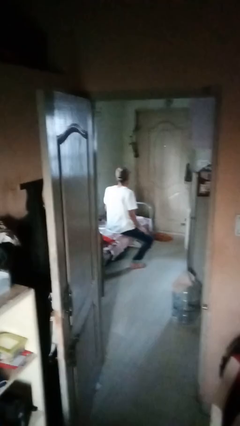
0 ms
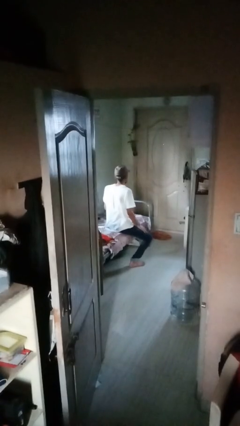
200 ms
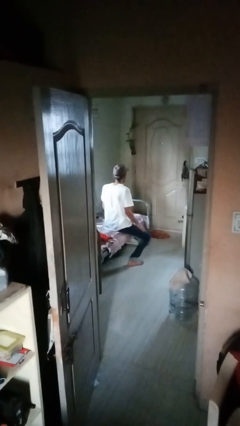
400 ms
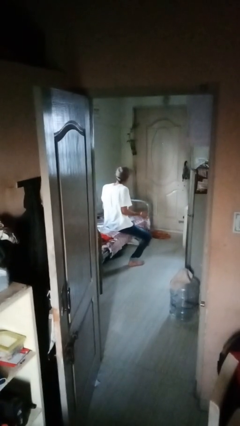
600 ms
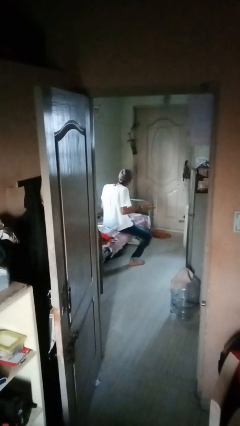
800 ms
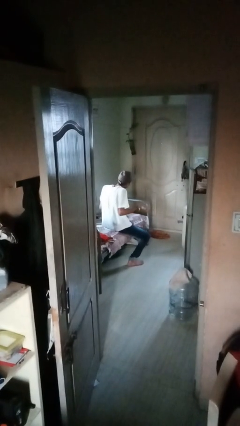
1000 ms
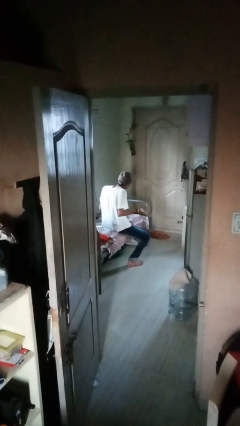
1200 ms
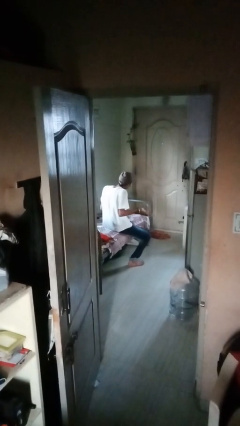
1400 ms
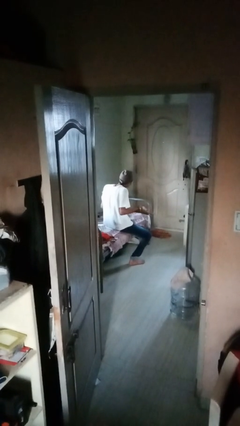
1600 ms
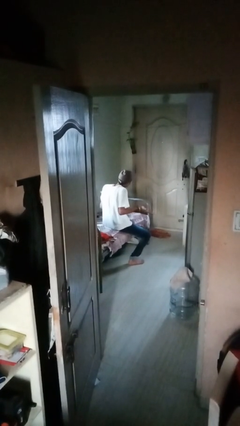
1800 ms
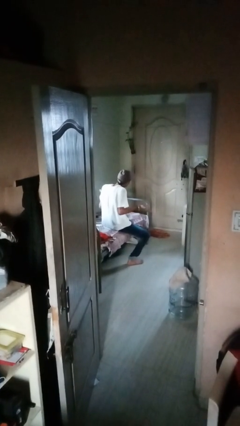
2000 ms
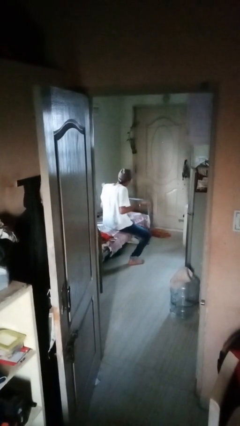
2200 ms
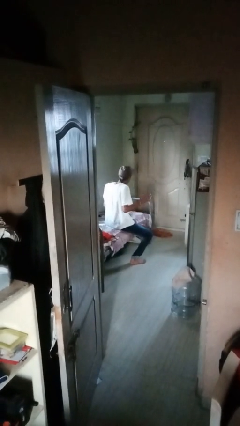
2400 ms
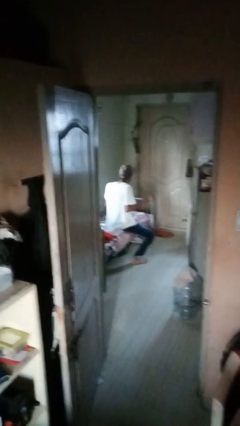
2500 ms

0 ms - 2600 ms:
person shrugs

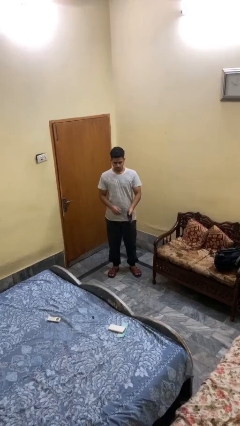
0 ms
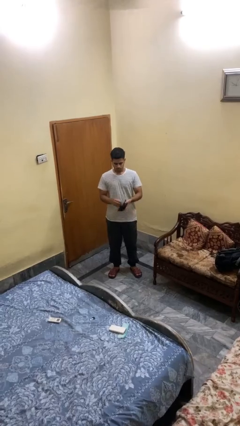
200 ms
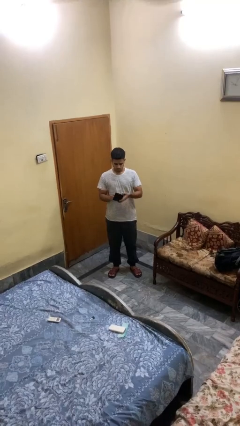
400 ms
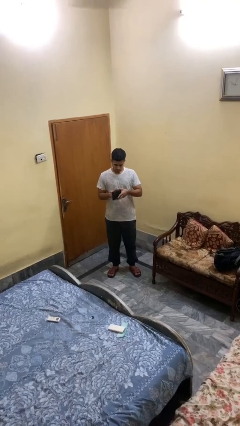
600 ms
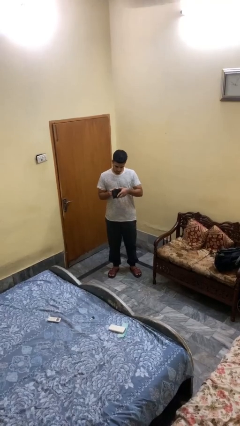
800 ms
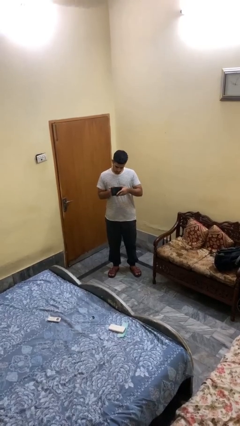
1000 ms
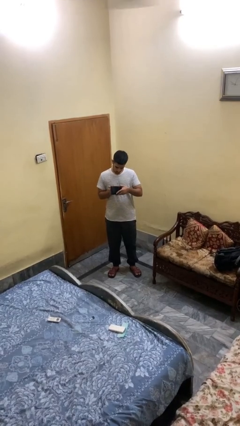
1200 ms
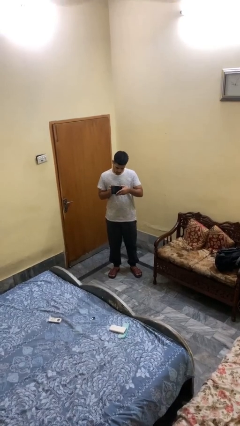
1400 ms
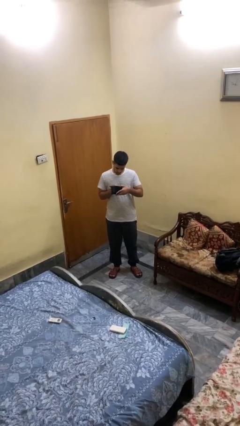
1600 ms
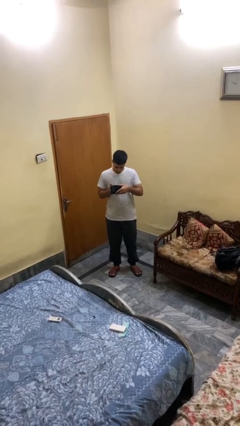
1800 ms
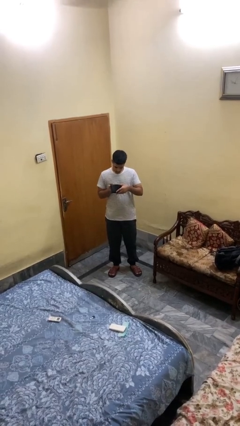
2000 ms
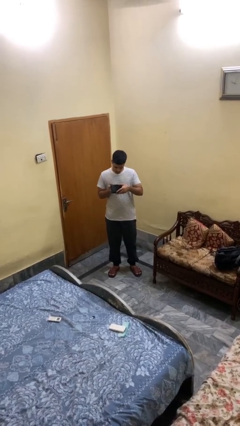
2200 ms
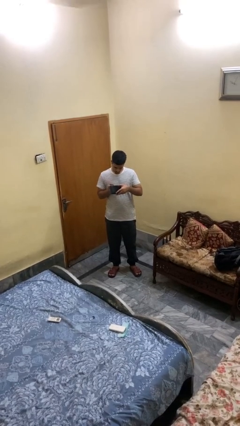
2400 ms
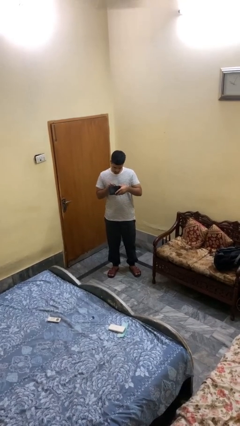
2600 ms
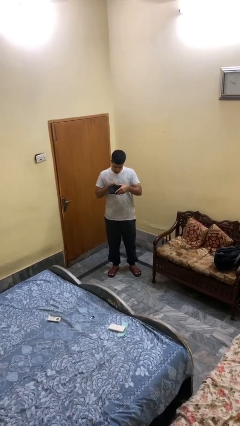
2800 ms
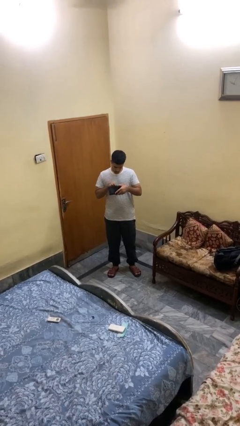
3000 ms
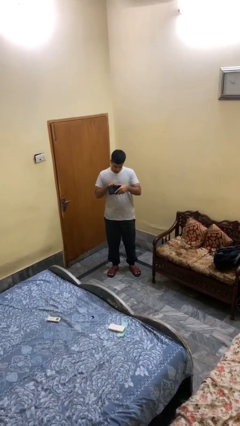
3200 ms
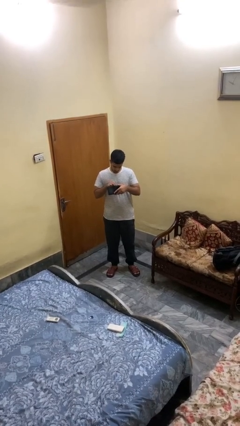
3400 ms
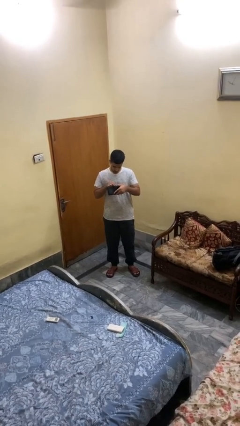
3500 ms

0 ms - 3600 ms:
person searches in purse

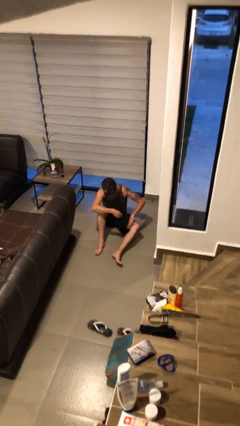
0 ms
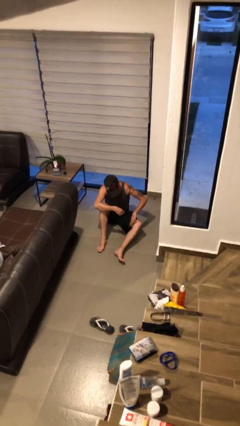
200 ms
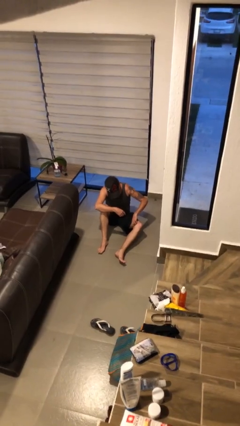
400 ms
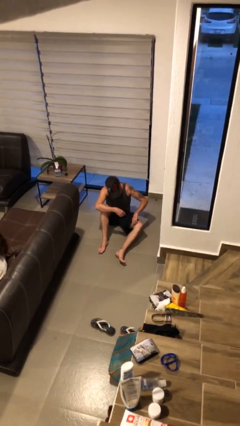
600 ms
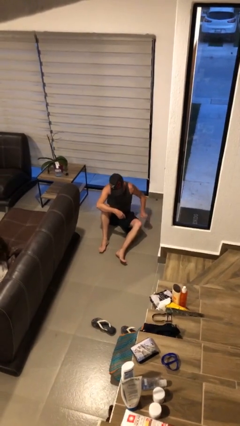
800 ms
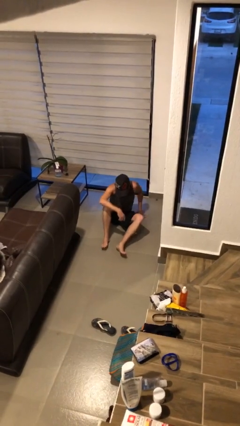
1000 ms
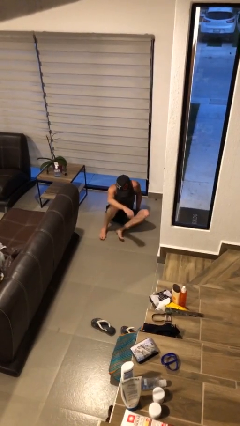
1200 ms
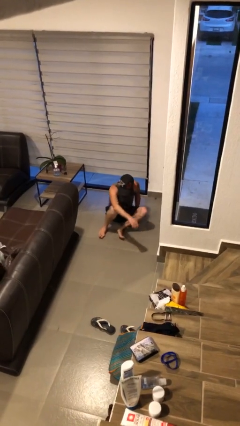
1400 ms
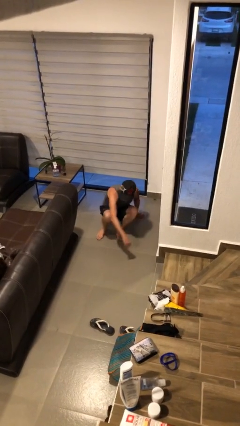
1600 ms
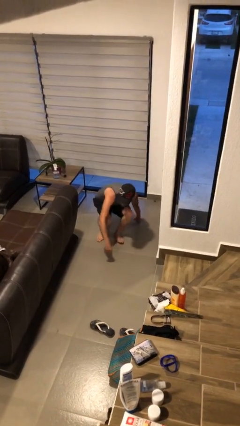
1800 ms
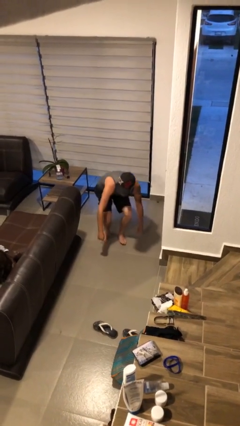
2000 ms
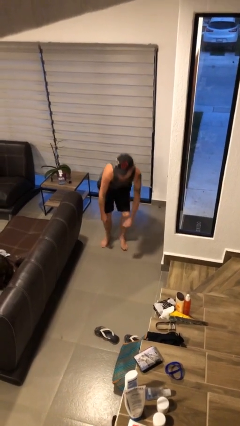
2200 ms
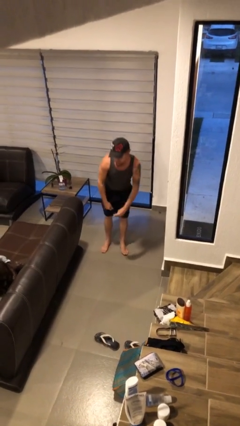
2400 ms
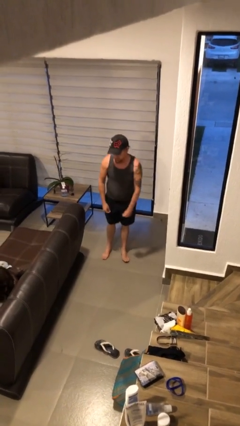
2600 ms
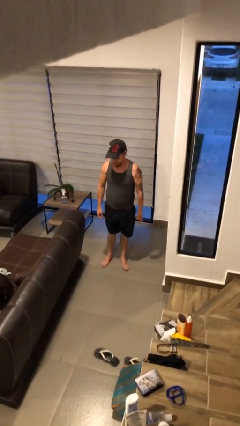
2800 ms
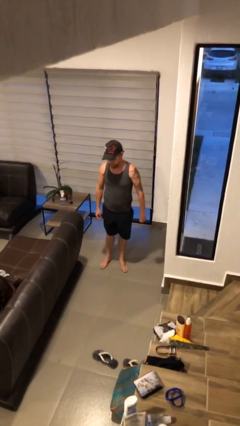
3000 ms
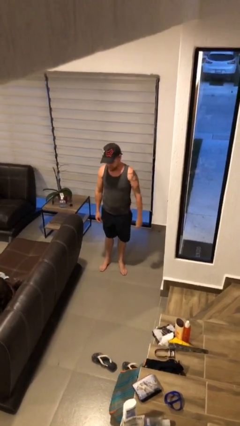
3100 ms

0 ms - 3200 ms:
person stands up

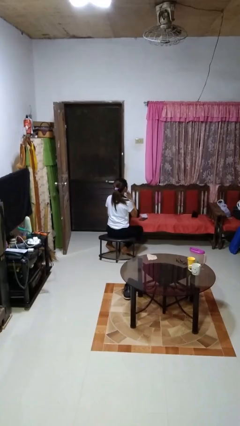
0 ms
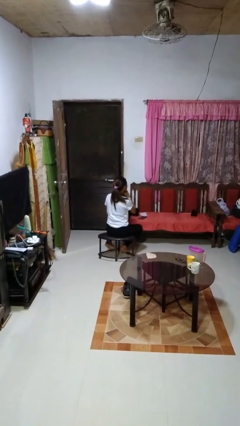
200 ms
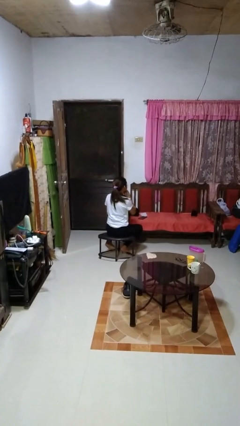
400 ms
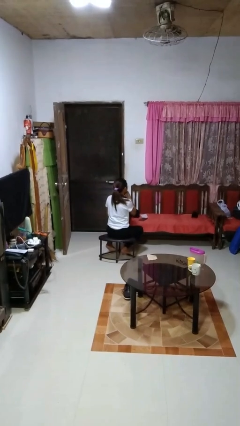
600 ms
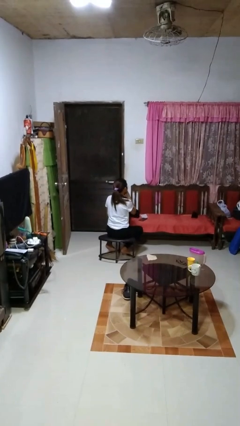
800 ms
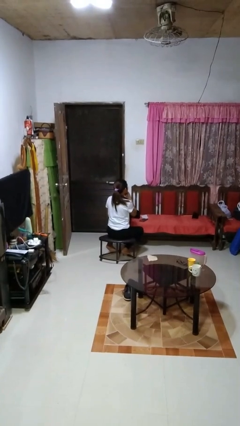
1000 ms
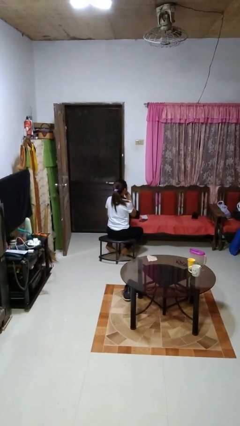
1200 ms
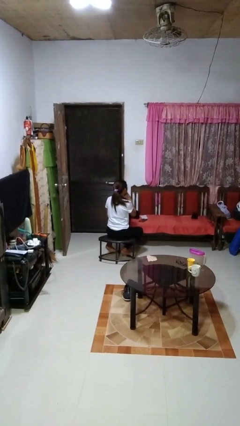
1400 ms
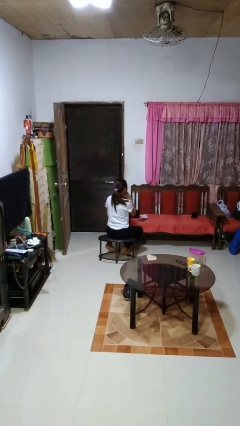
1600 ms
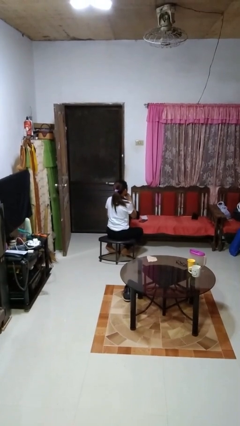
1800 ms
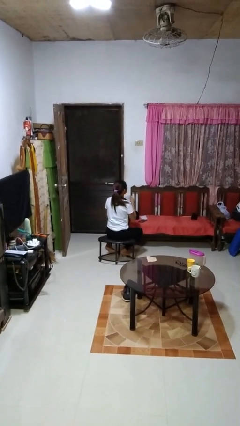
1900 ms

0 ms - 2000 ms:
person strokes chin

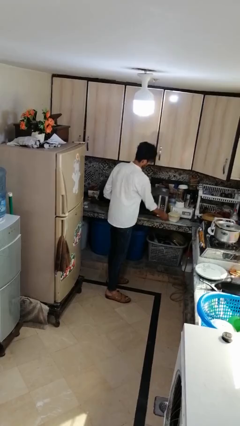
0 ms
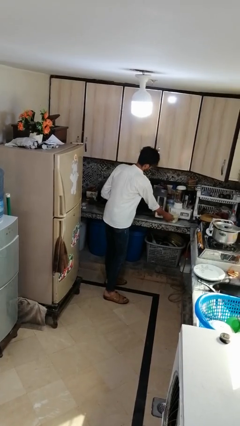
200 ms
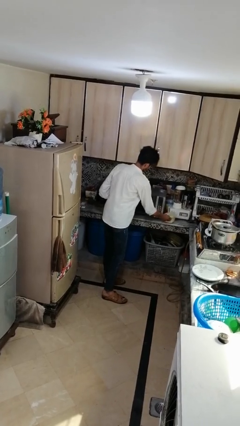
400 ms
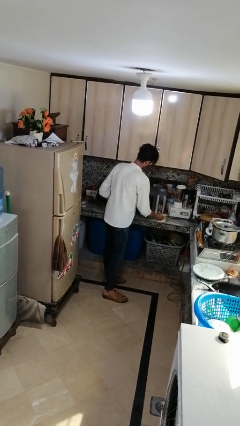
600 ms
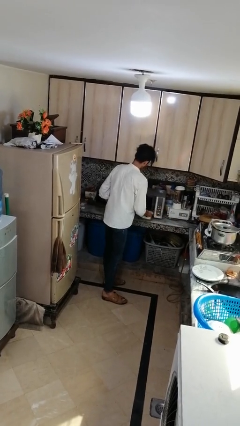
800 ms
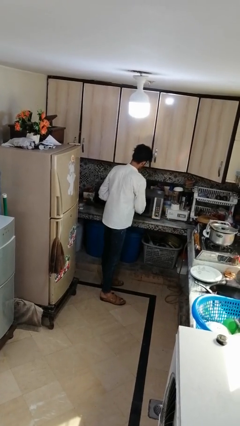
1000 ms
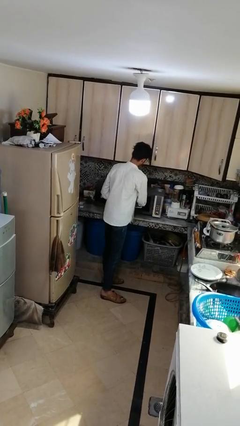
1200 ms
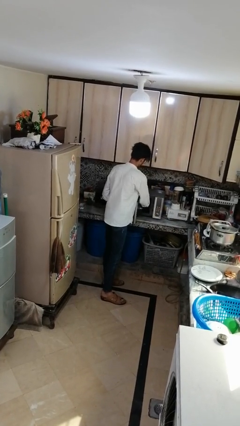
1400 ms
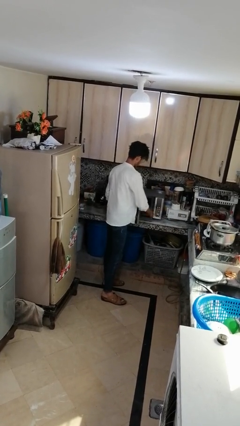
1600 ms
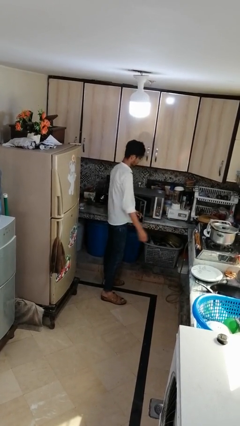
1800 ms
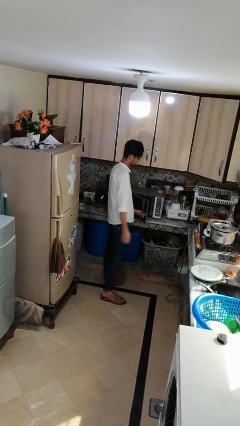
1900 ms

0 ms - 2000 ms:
person puts object into microwave

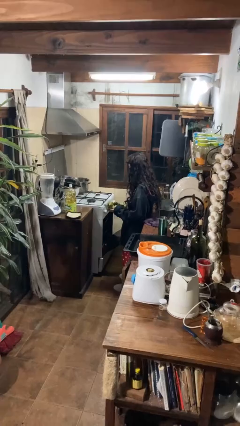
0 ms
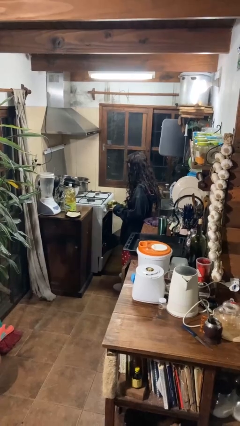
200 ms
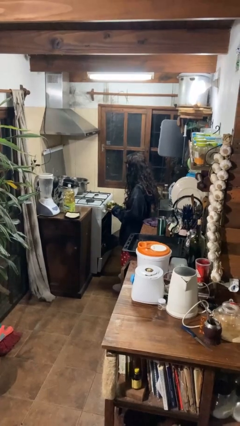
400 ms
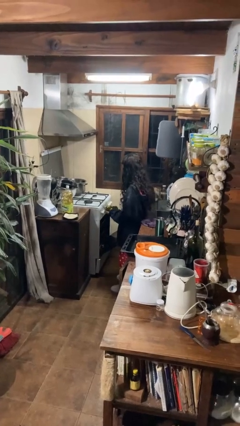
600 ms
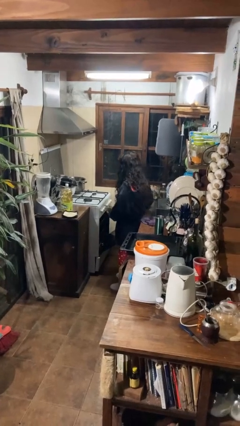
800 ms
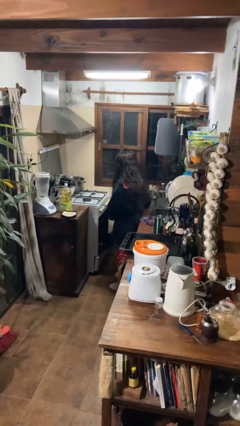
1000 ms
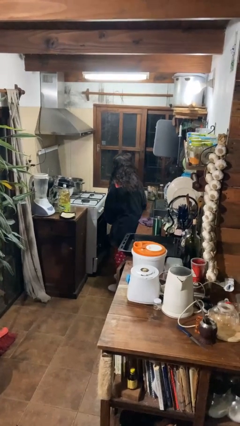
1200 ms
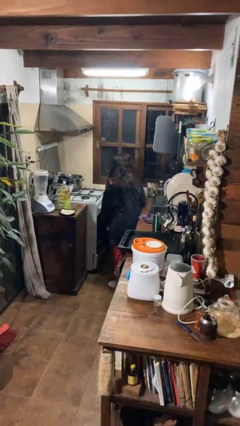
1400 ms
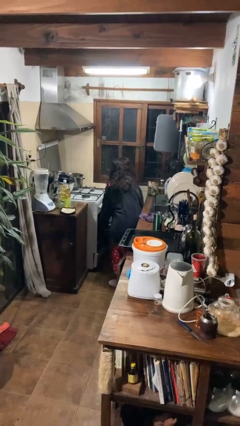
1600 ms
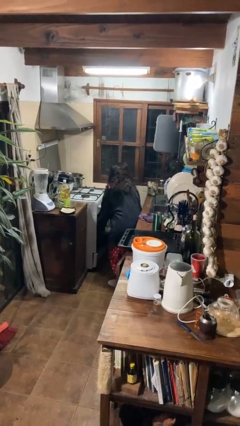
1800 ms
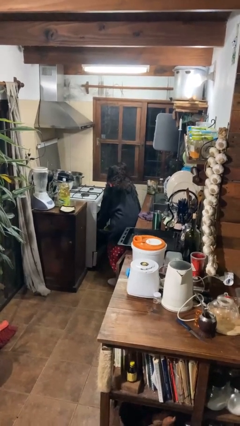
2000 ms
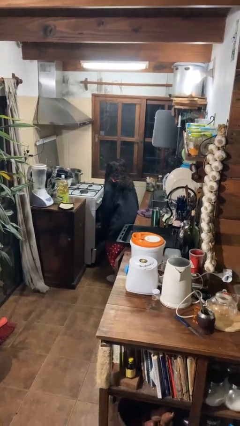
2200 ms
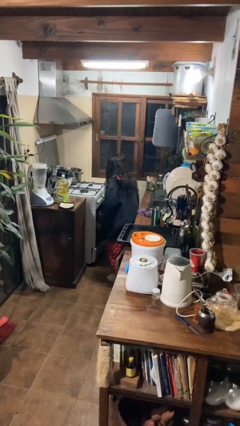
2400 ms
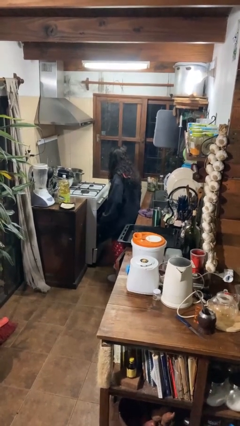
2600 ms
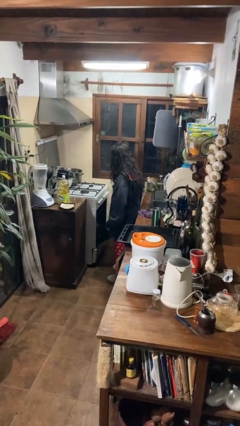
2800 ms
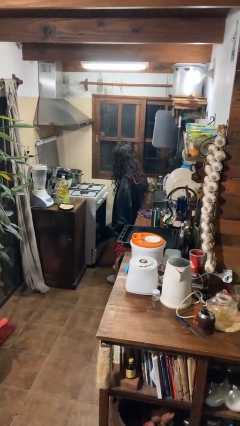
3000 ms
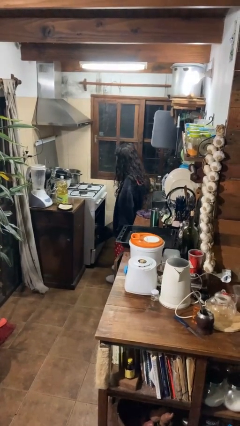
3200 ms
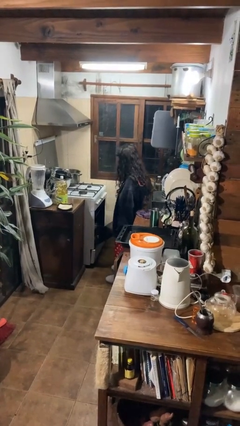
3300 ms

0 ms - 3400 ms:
person puts object into oven

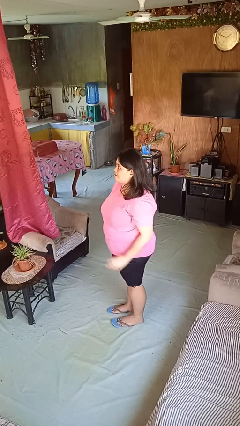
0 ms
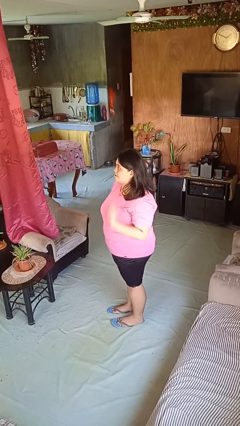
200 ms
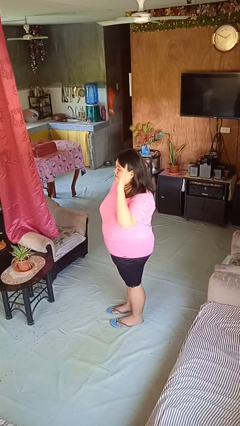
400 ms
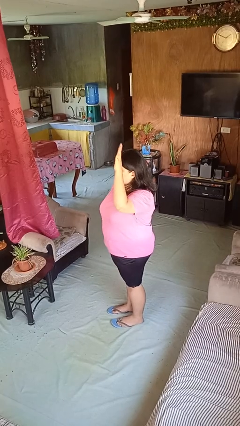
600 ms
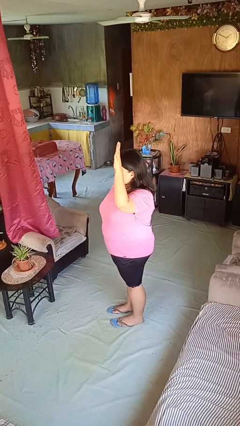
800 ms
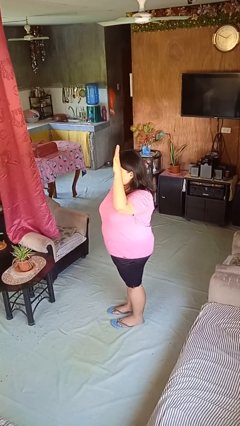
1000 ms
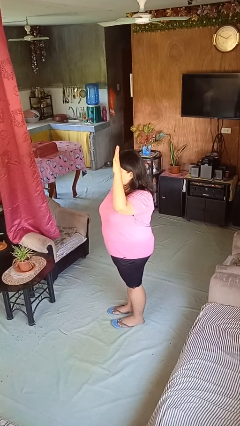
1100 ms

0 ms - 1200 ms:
person gestures raise hand
